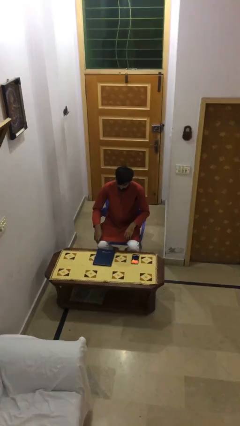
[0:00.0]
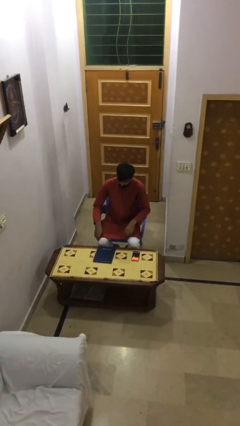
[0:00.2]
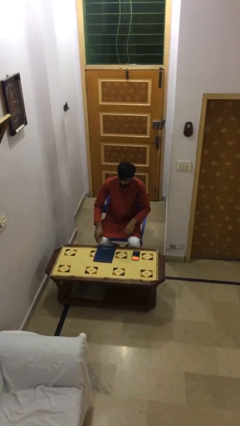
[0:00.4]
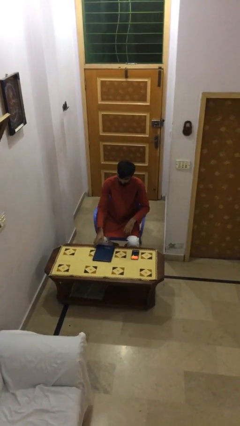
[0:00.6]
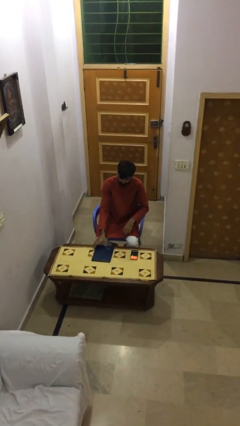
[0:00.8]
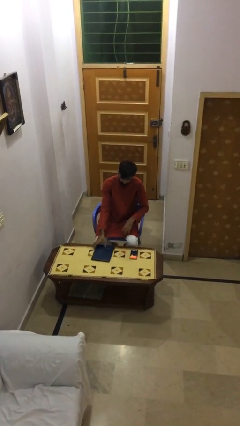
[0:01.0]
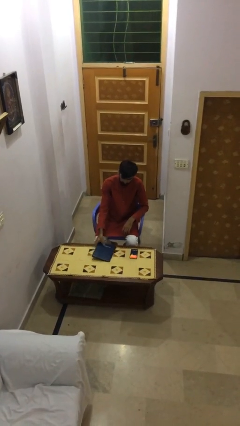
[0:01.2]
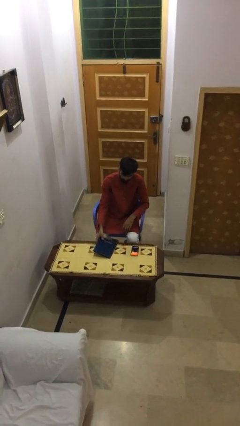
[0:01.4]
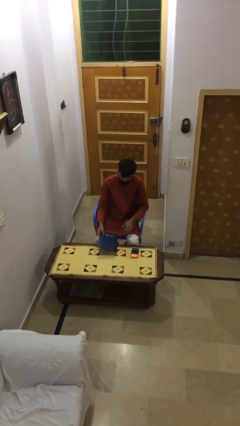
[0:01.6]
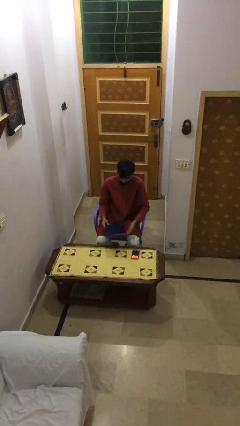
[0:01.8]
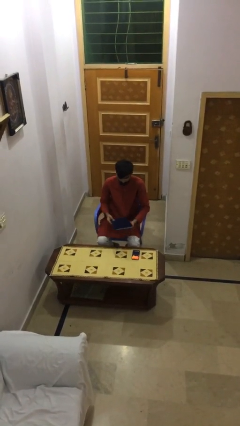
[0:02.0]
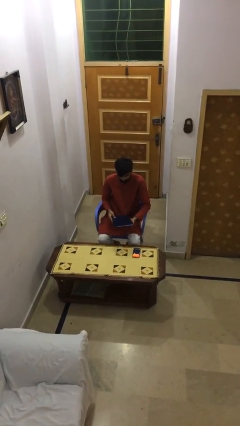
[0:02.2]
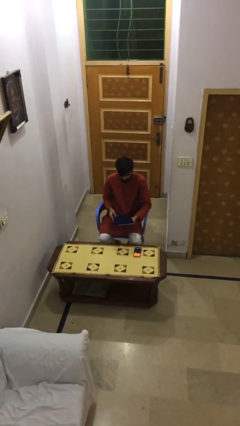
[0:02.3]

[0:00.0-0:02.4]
person picks up object from table

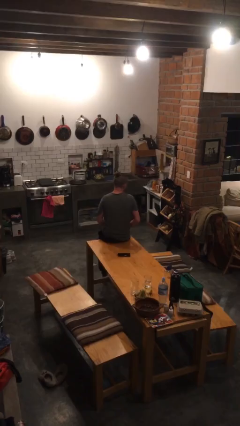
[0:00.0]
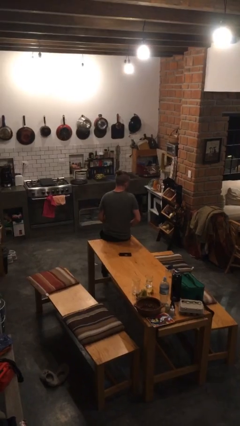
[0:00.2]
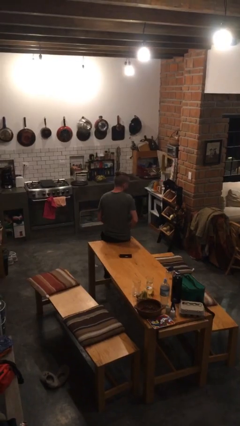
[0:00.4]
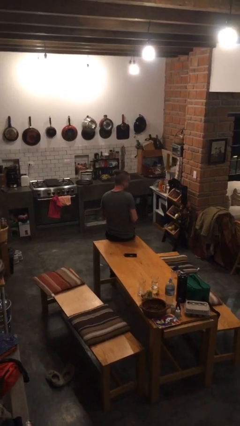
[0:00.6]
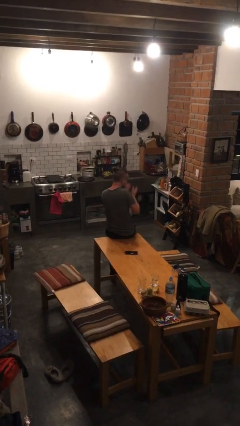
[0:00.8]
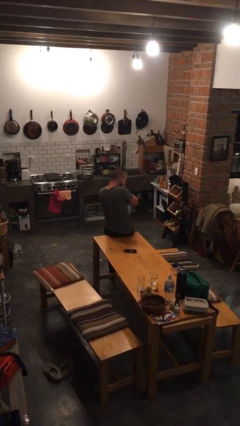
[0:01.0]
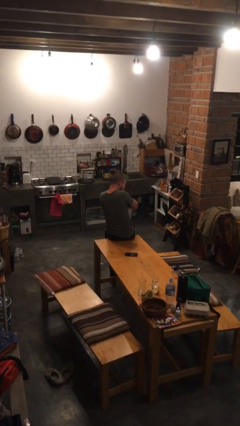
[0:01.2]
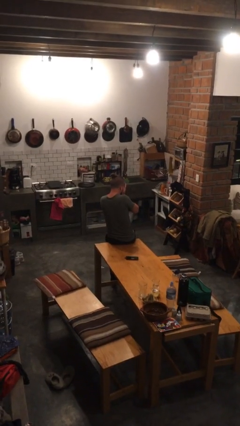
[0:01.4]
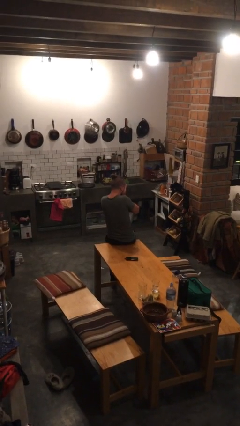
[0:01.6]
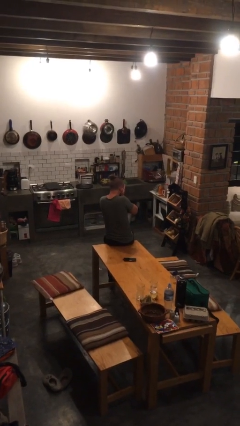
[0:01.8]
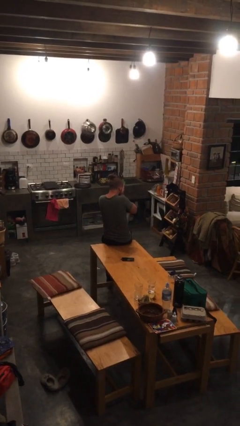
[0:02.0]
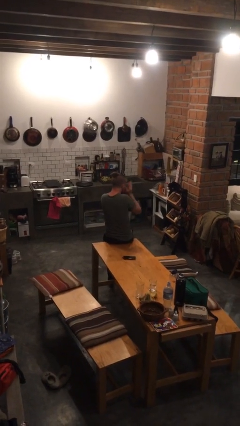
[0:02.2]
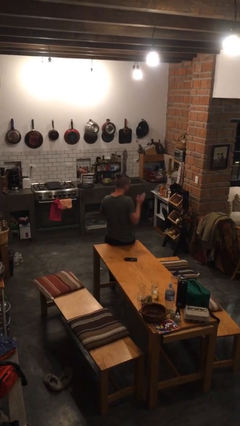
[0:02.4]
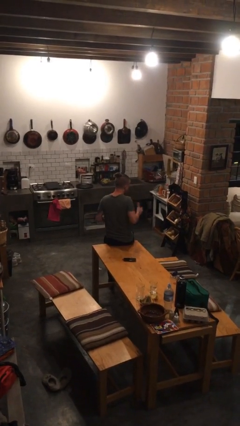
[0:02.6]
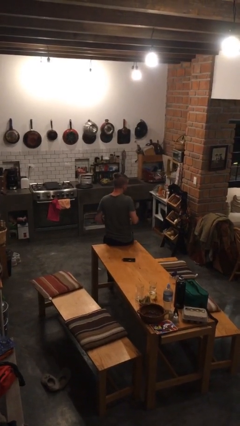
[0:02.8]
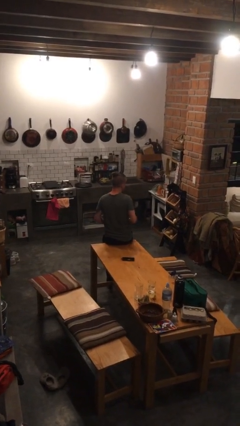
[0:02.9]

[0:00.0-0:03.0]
person covers face with hands

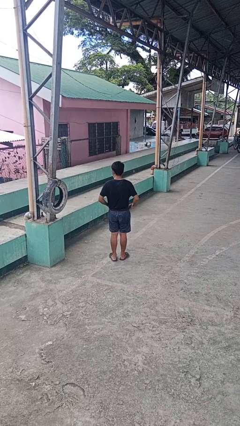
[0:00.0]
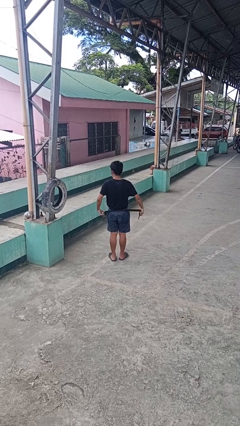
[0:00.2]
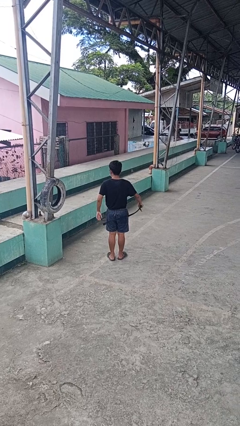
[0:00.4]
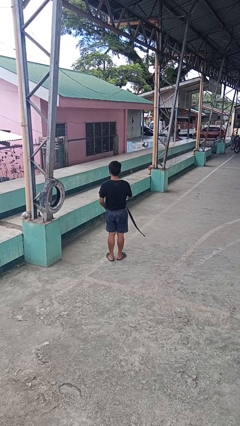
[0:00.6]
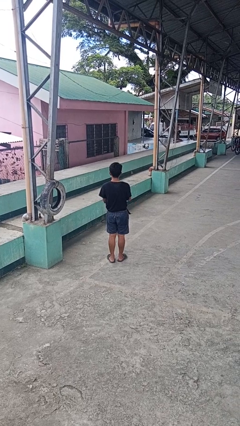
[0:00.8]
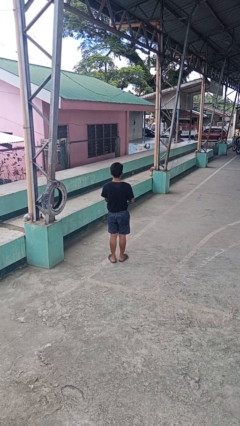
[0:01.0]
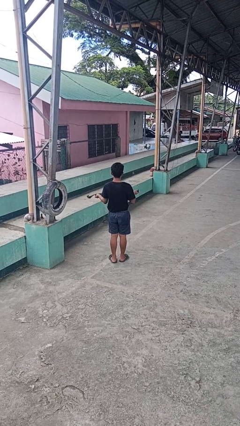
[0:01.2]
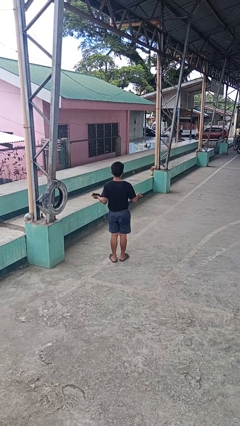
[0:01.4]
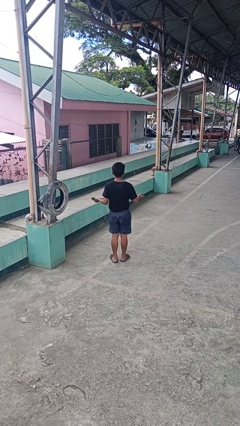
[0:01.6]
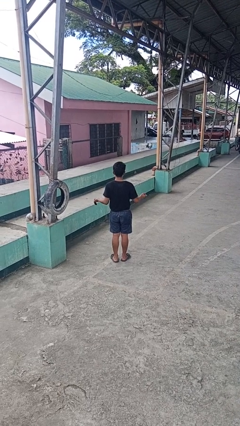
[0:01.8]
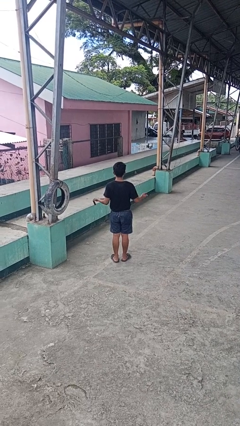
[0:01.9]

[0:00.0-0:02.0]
person takes off belt

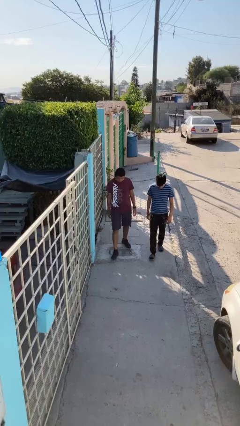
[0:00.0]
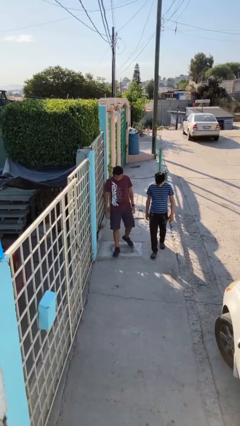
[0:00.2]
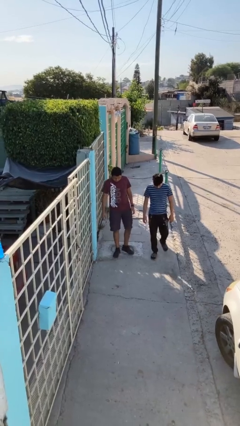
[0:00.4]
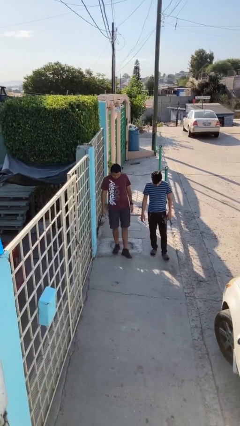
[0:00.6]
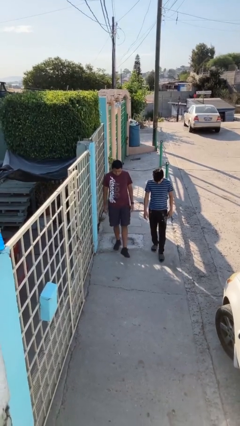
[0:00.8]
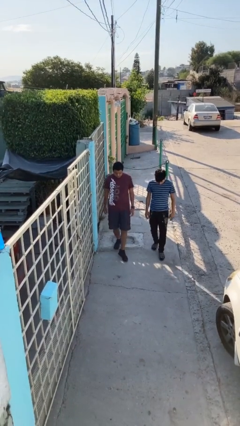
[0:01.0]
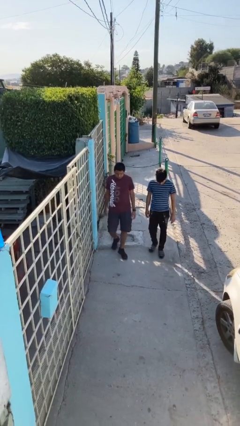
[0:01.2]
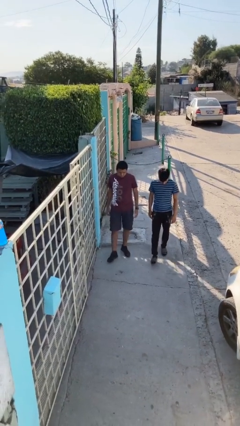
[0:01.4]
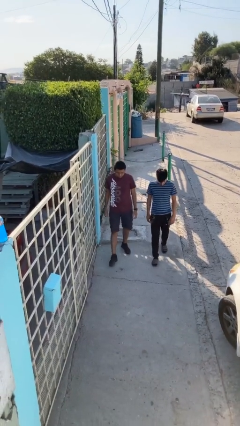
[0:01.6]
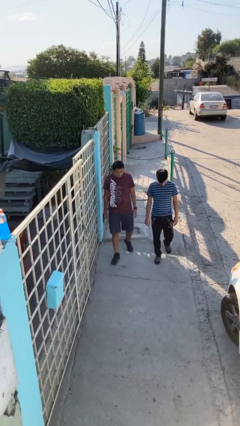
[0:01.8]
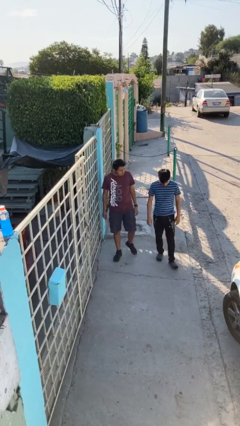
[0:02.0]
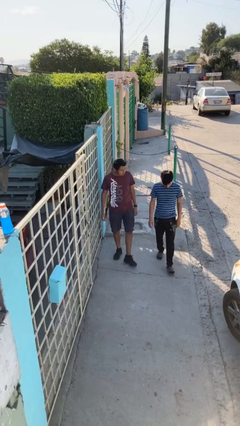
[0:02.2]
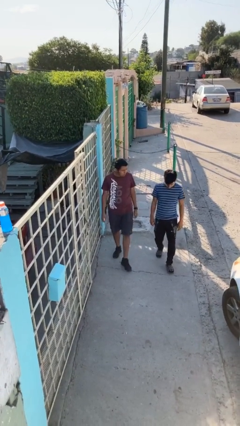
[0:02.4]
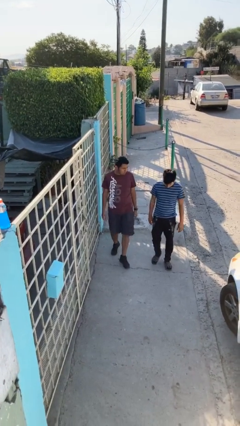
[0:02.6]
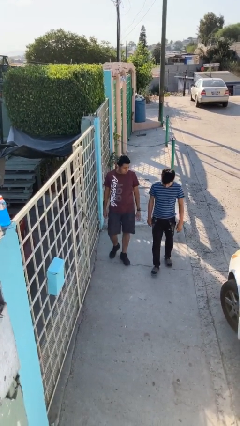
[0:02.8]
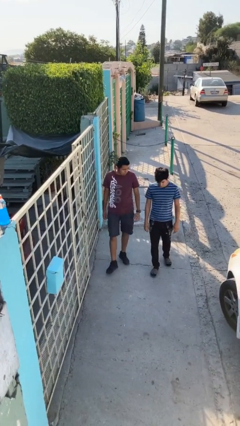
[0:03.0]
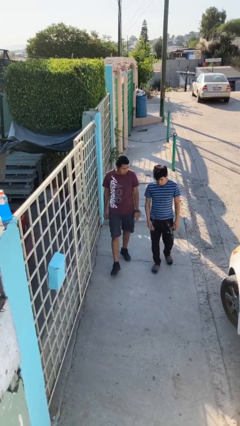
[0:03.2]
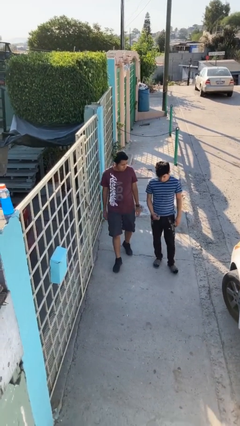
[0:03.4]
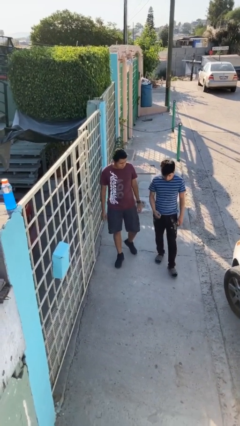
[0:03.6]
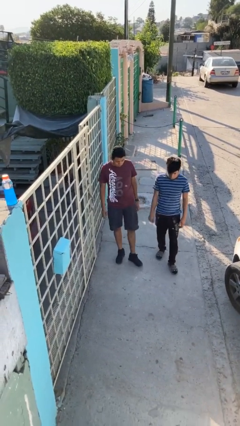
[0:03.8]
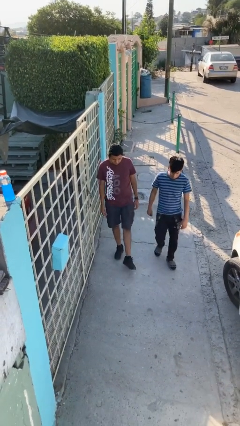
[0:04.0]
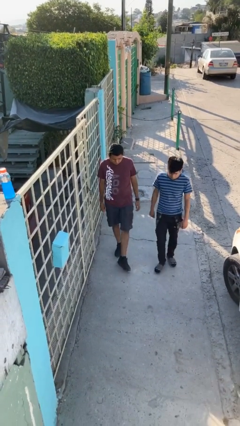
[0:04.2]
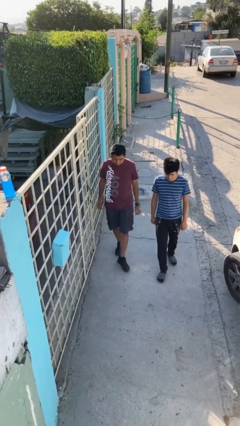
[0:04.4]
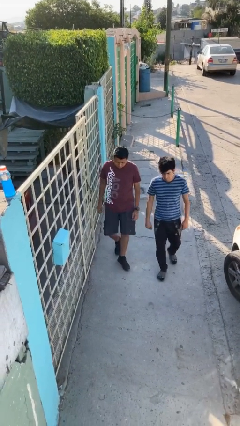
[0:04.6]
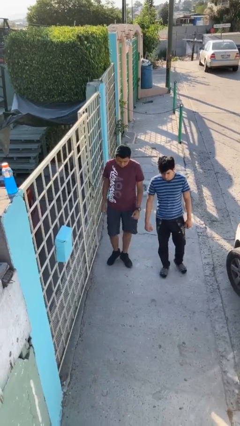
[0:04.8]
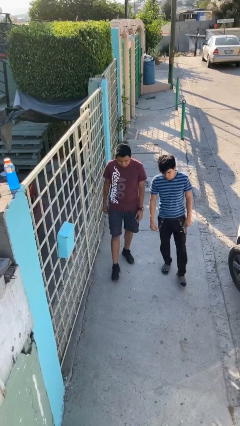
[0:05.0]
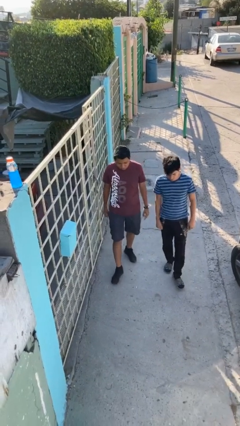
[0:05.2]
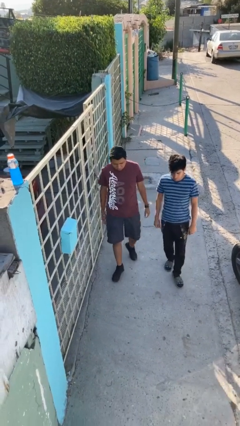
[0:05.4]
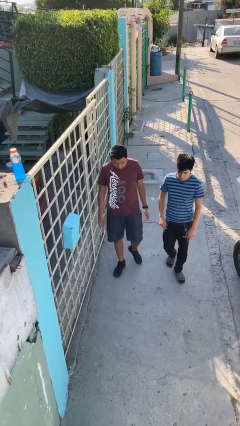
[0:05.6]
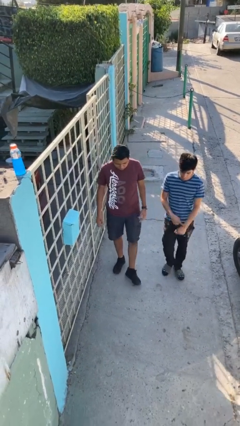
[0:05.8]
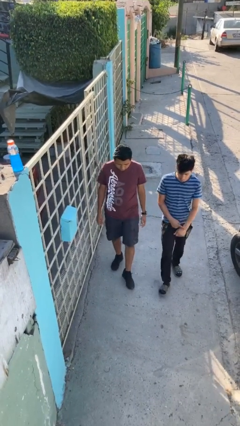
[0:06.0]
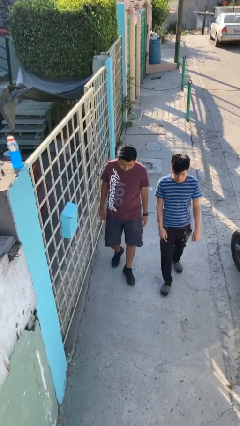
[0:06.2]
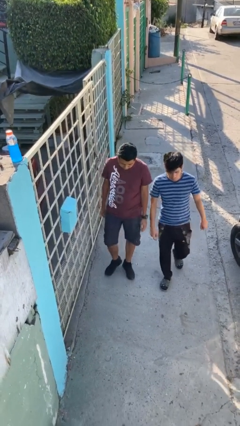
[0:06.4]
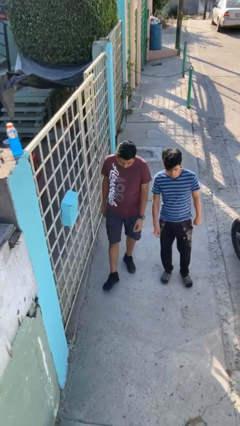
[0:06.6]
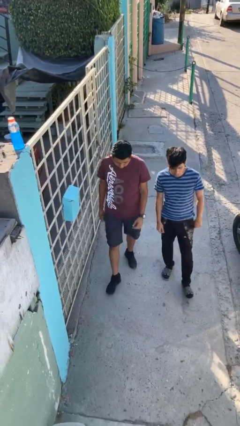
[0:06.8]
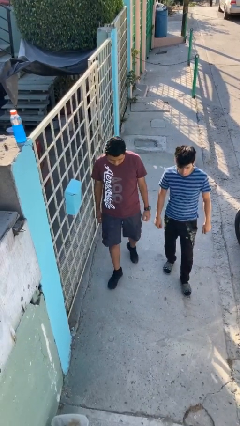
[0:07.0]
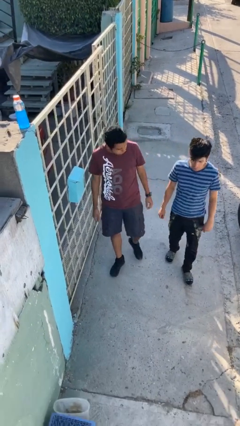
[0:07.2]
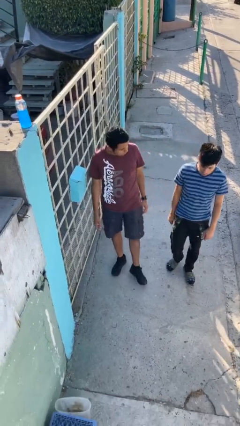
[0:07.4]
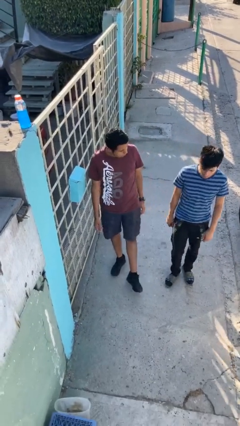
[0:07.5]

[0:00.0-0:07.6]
person talks to person

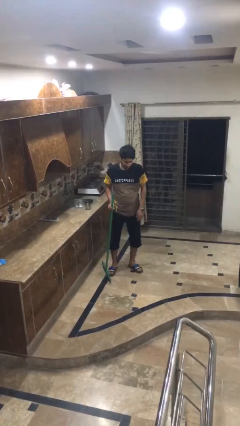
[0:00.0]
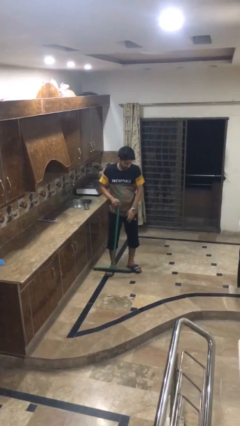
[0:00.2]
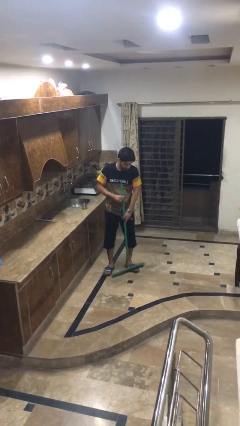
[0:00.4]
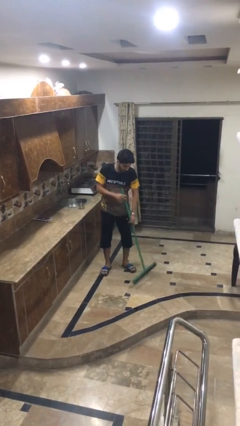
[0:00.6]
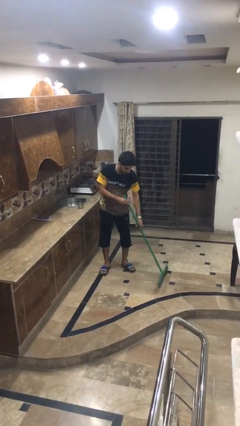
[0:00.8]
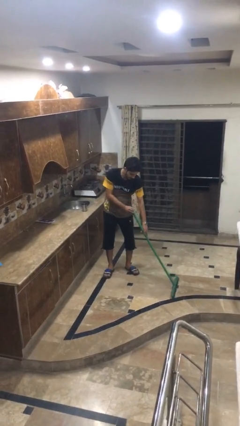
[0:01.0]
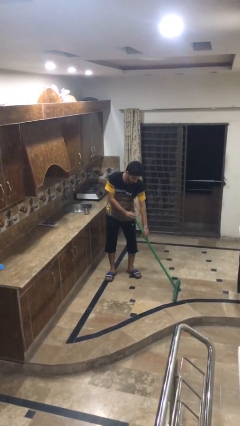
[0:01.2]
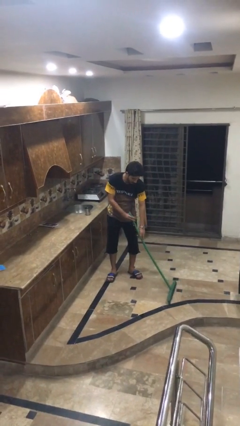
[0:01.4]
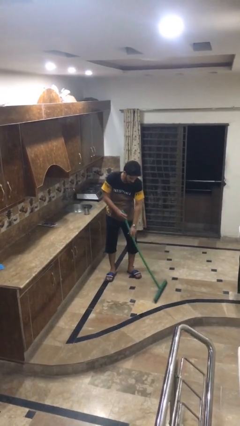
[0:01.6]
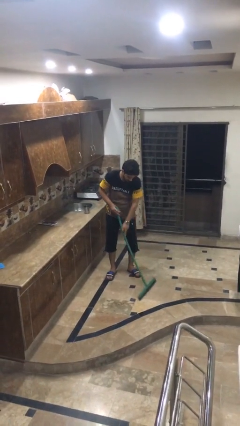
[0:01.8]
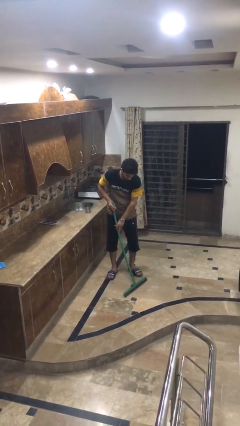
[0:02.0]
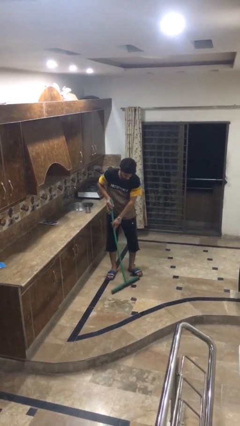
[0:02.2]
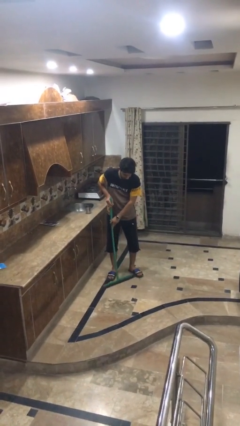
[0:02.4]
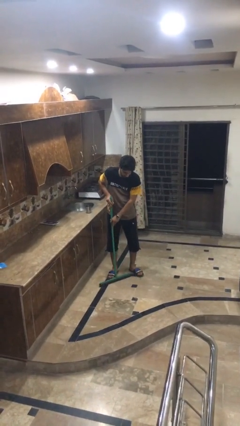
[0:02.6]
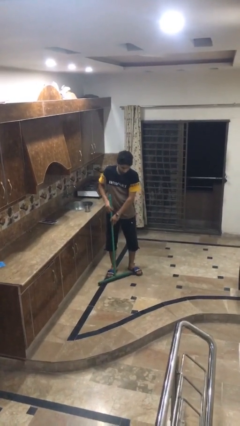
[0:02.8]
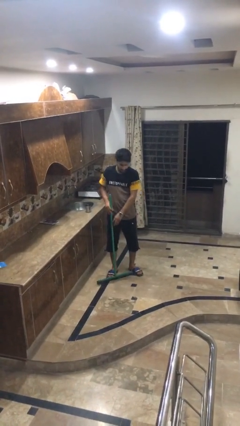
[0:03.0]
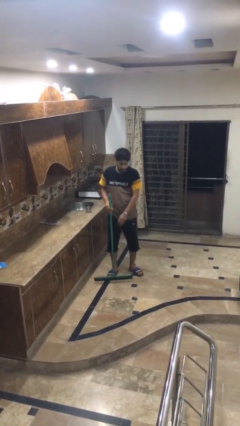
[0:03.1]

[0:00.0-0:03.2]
person mops
